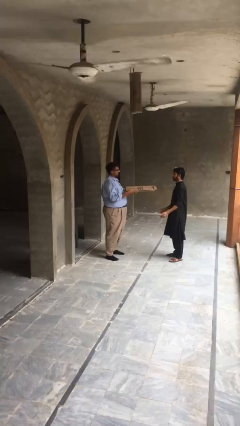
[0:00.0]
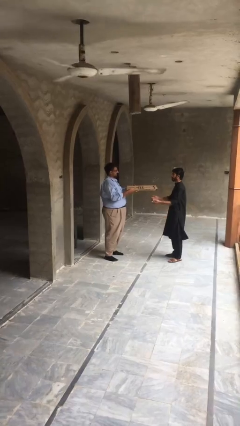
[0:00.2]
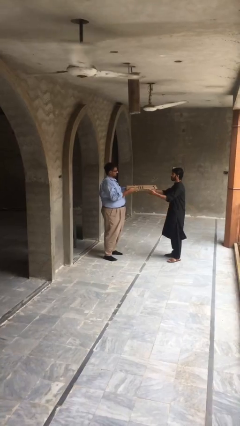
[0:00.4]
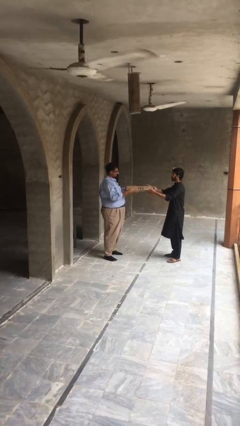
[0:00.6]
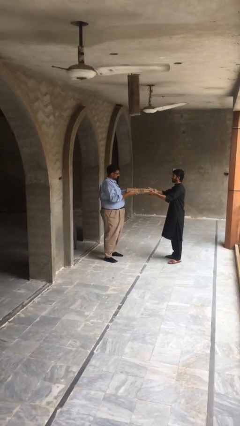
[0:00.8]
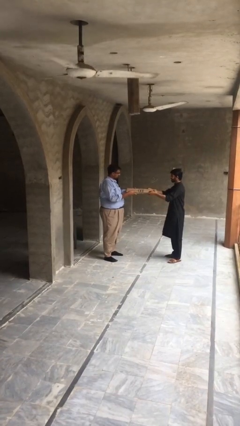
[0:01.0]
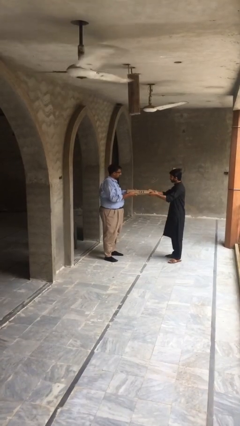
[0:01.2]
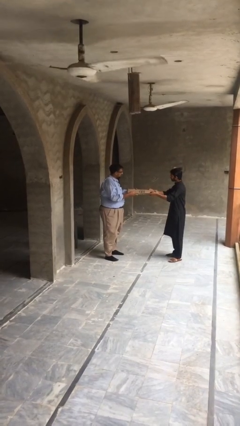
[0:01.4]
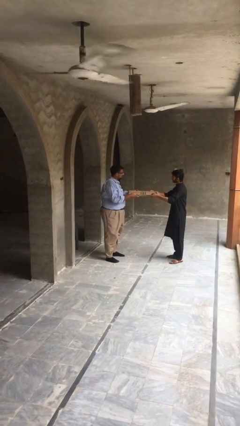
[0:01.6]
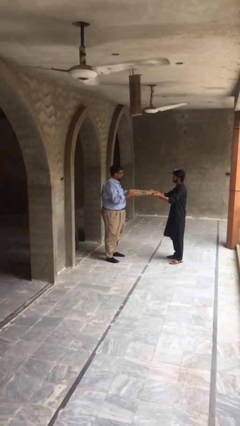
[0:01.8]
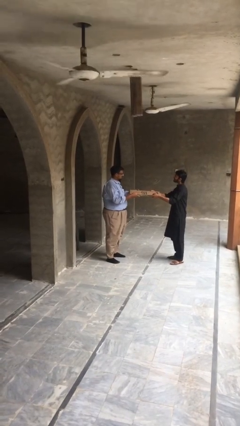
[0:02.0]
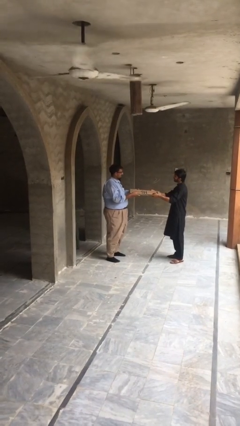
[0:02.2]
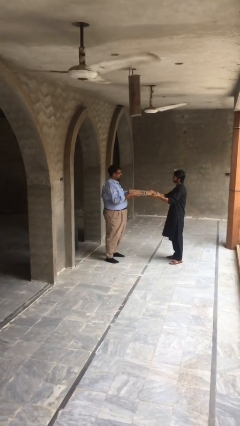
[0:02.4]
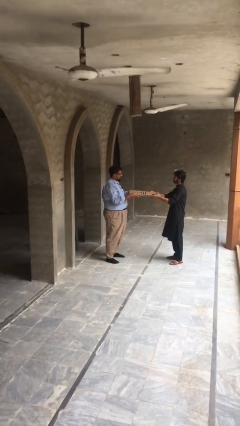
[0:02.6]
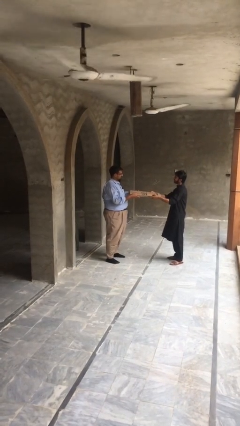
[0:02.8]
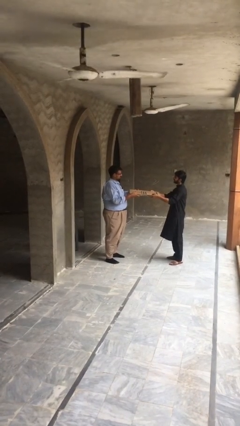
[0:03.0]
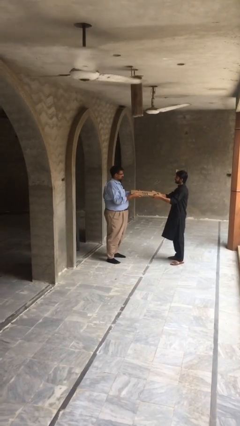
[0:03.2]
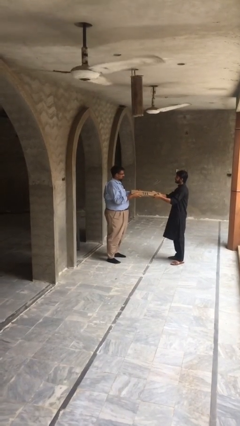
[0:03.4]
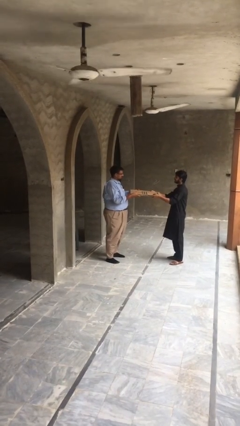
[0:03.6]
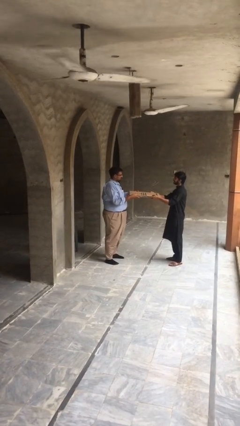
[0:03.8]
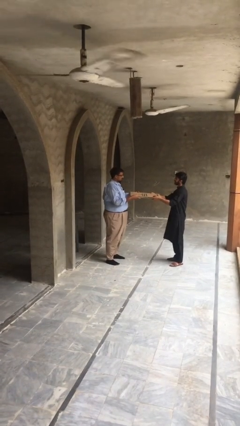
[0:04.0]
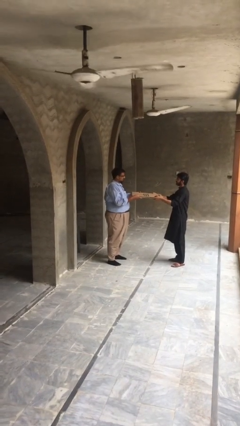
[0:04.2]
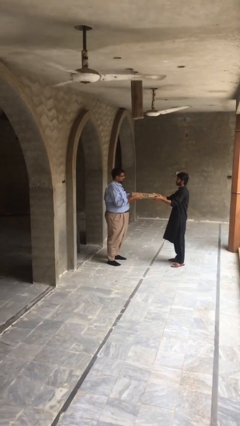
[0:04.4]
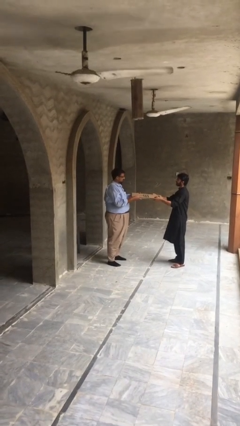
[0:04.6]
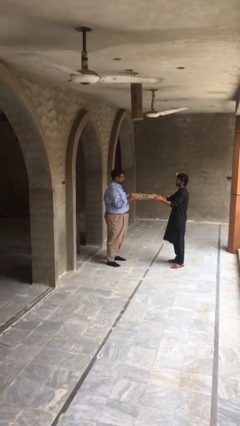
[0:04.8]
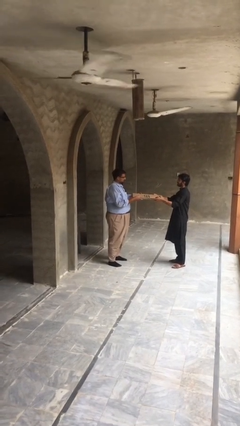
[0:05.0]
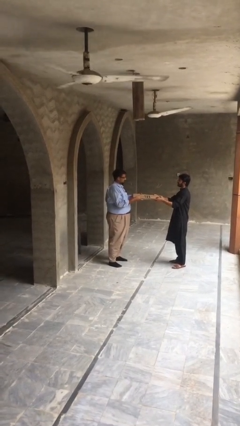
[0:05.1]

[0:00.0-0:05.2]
person transfers object to person

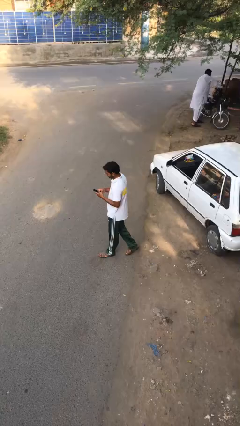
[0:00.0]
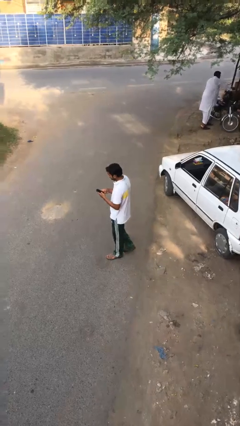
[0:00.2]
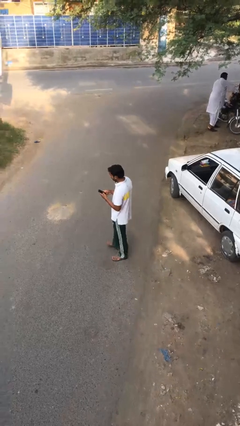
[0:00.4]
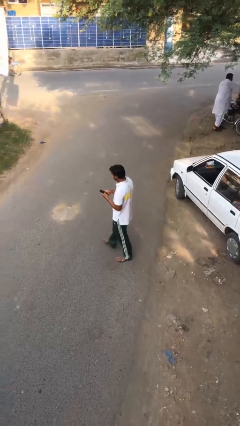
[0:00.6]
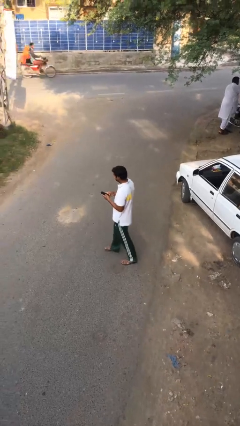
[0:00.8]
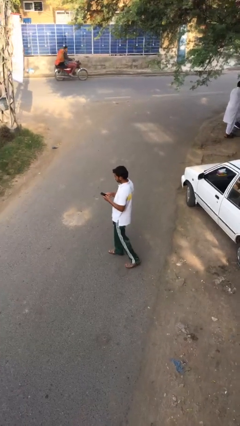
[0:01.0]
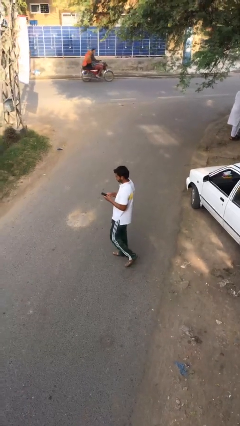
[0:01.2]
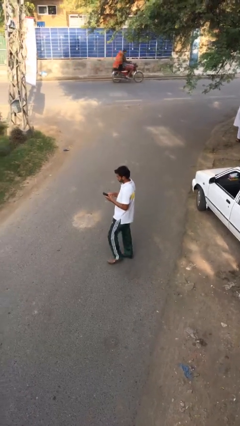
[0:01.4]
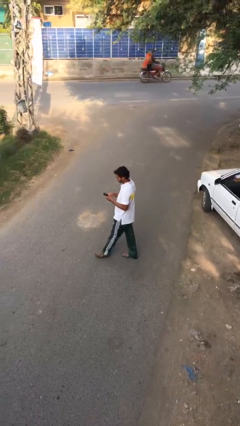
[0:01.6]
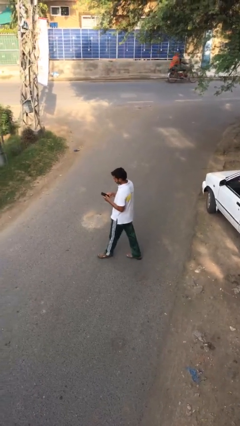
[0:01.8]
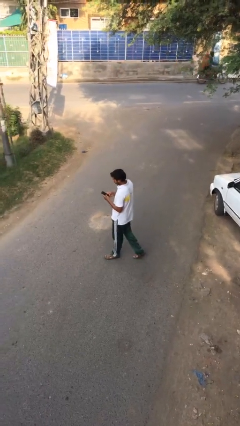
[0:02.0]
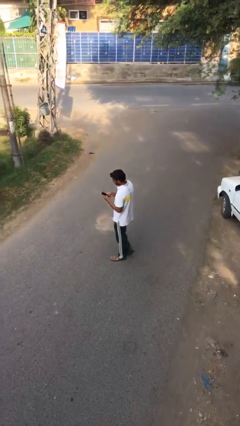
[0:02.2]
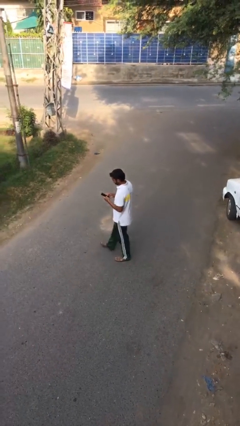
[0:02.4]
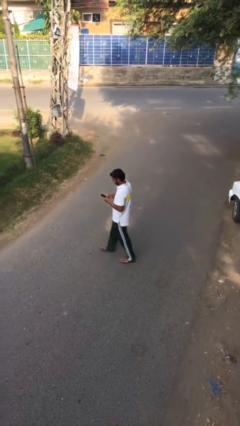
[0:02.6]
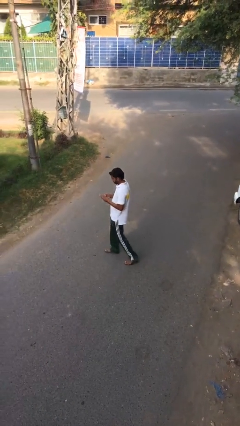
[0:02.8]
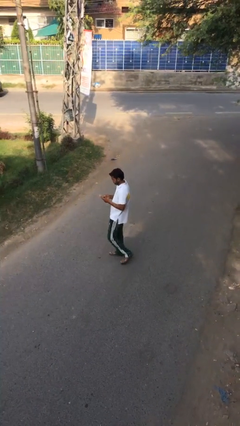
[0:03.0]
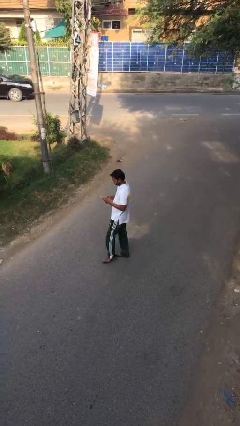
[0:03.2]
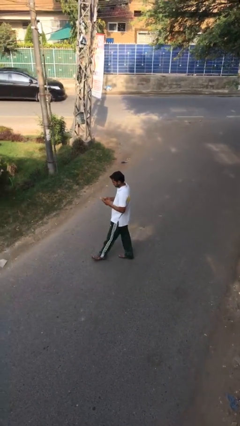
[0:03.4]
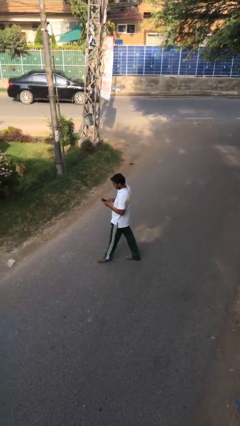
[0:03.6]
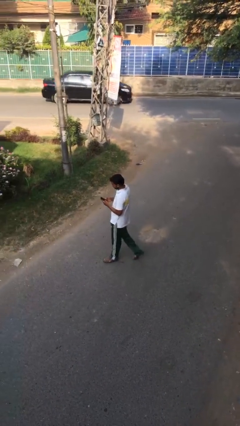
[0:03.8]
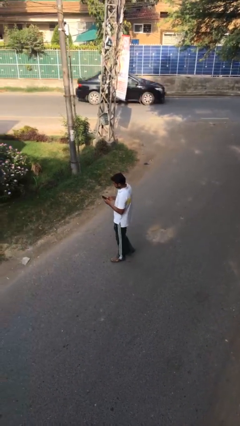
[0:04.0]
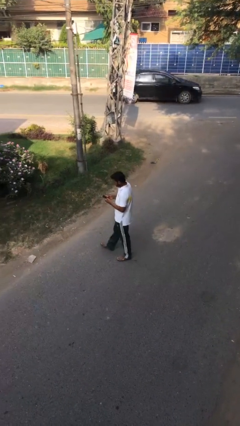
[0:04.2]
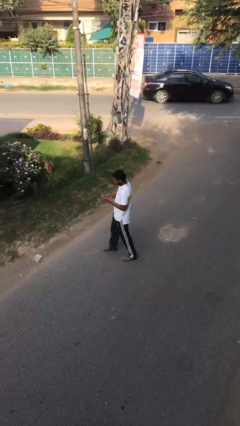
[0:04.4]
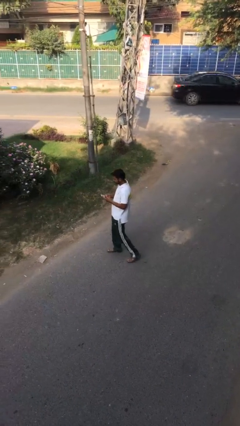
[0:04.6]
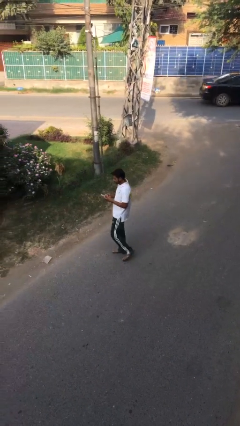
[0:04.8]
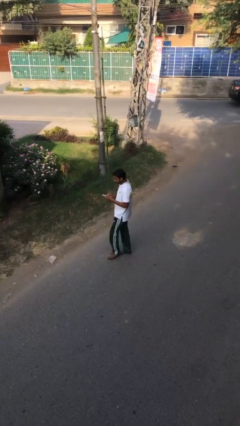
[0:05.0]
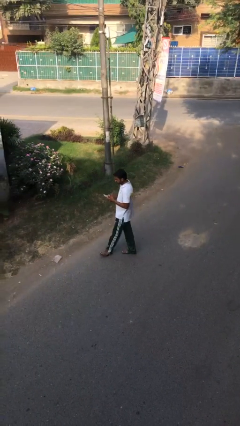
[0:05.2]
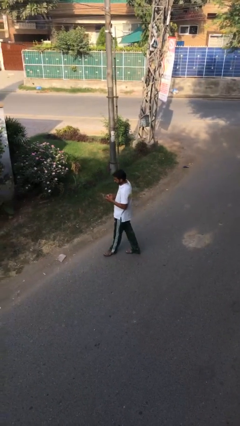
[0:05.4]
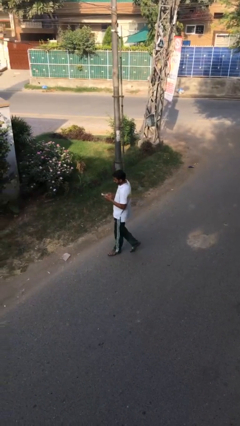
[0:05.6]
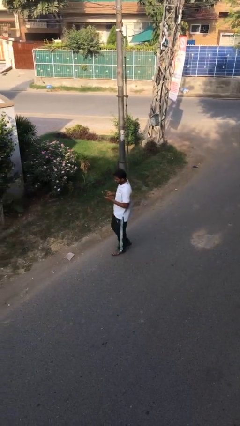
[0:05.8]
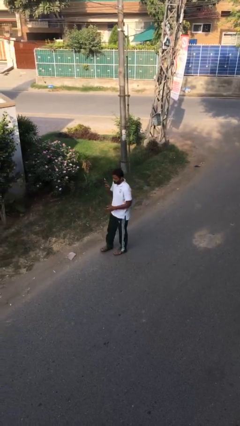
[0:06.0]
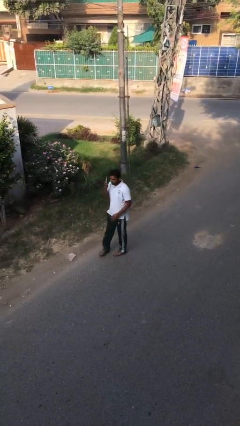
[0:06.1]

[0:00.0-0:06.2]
person texts on phone

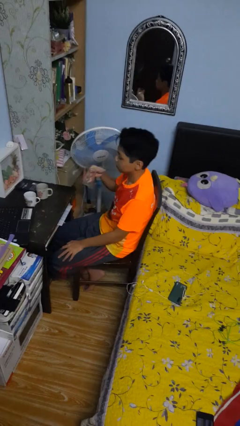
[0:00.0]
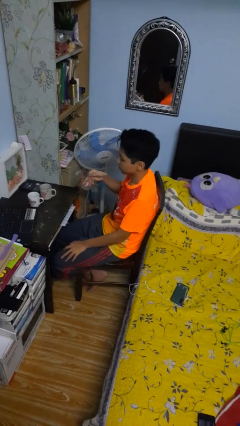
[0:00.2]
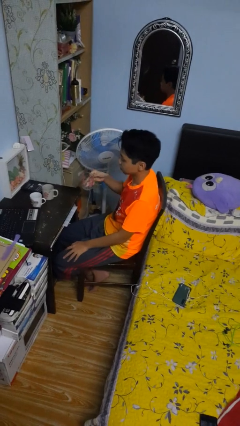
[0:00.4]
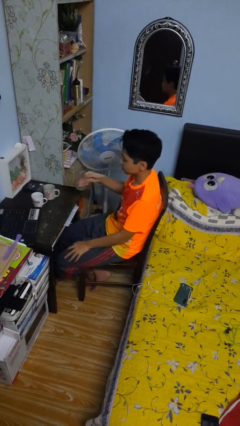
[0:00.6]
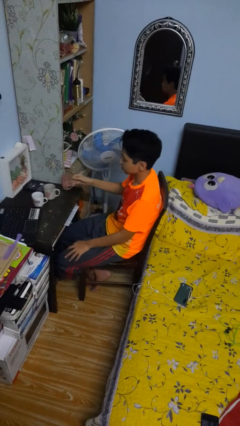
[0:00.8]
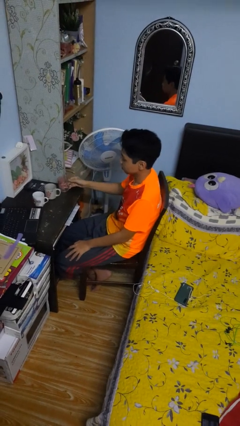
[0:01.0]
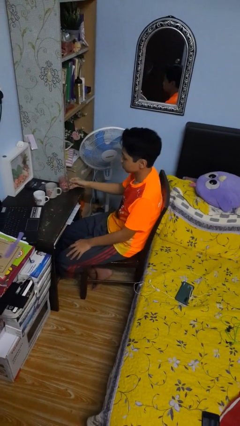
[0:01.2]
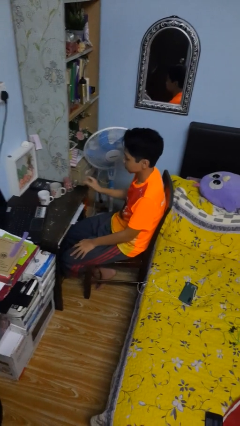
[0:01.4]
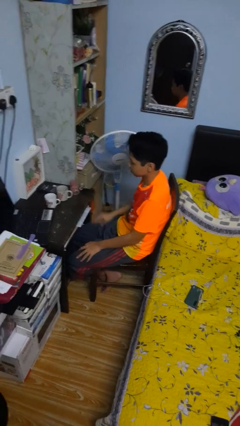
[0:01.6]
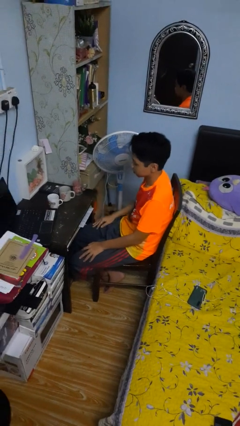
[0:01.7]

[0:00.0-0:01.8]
person puts down object on table

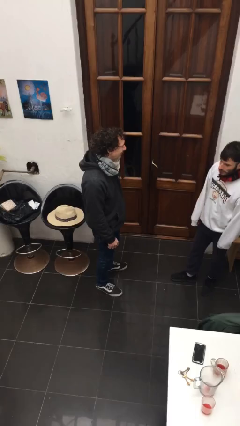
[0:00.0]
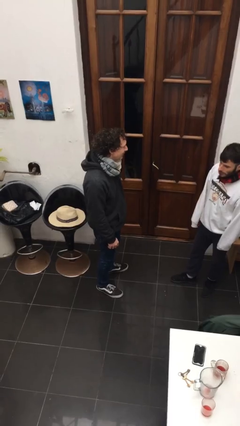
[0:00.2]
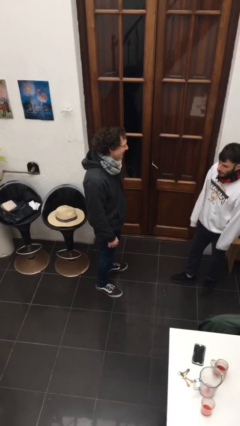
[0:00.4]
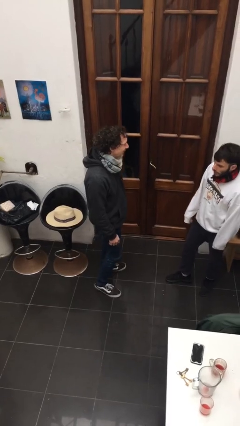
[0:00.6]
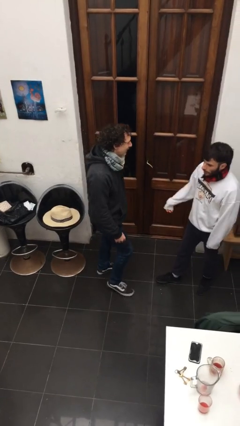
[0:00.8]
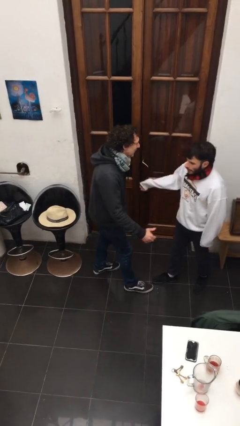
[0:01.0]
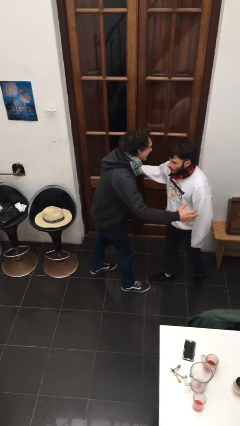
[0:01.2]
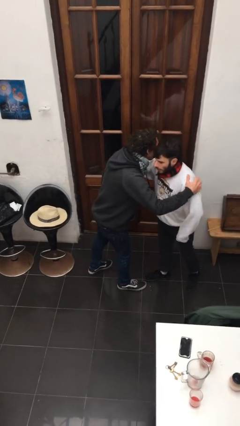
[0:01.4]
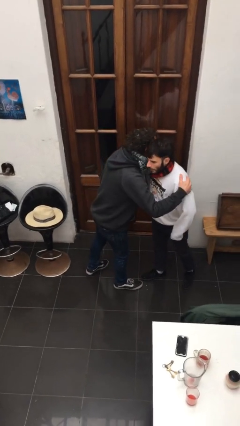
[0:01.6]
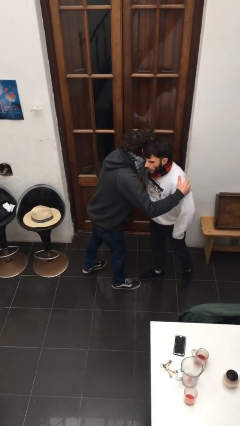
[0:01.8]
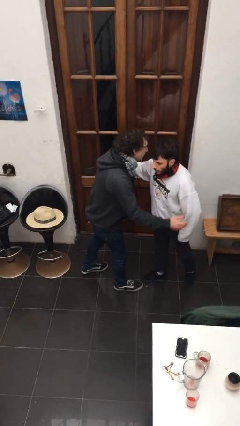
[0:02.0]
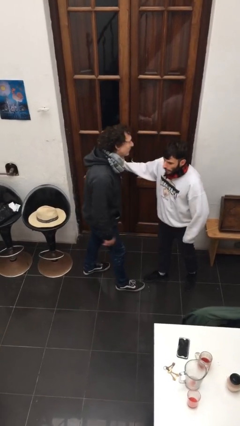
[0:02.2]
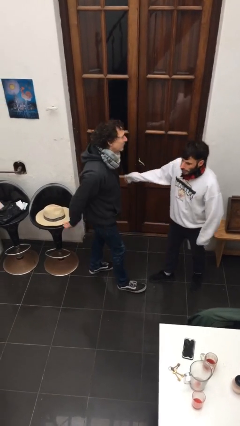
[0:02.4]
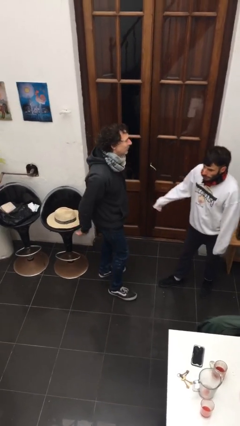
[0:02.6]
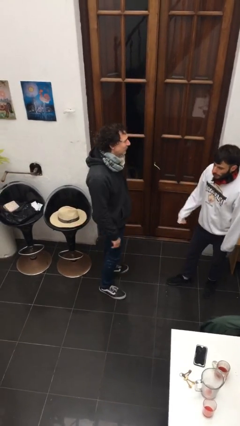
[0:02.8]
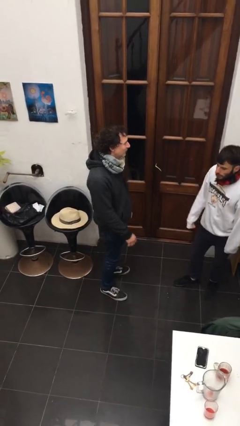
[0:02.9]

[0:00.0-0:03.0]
person kisses cheek of person

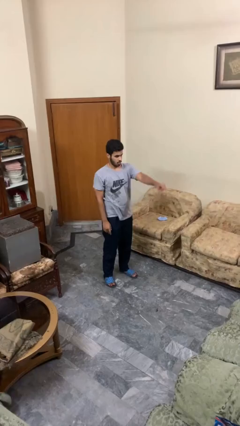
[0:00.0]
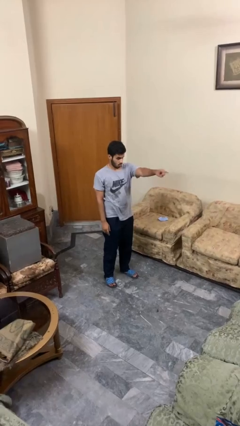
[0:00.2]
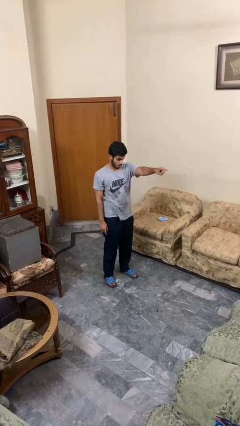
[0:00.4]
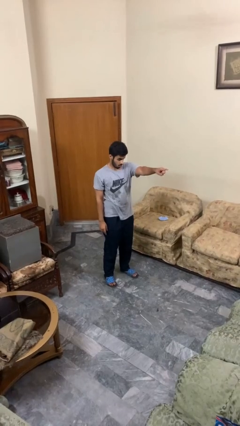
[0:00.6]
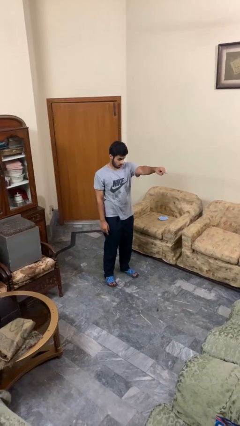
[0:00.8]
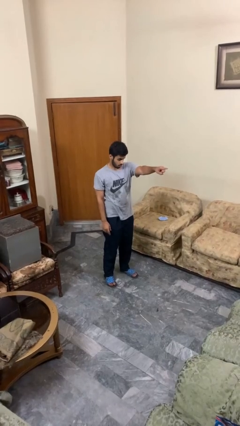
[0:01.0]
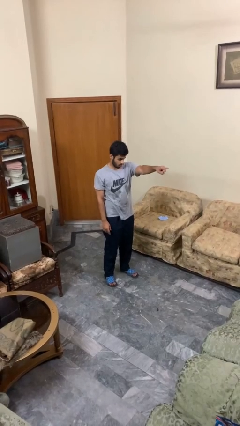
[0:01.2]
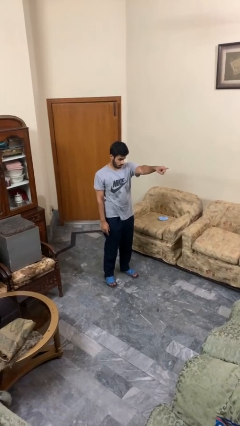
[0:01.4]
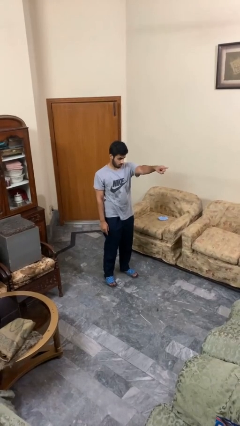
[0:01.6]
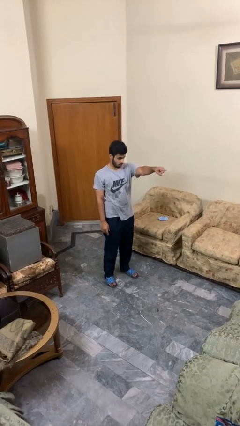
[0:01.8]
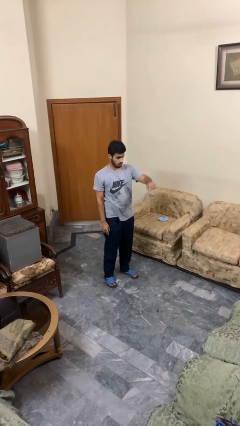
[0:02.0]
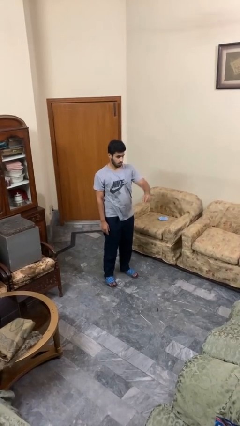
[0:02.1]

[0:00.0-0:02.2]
person points at person
